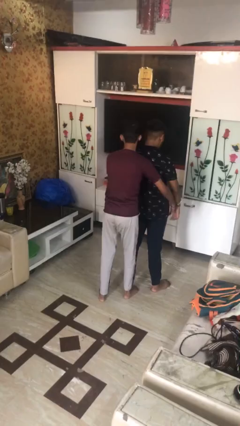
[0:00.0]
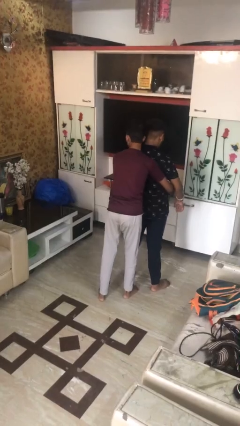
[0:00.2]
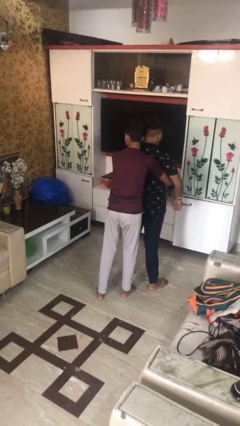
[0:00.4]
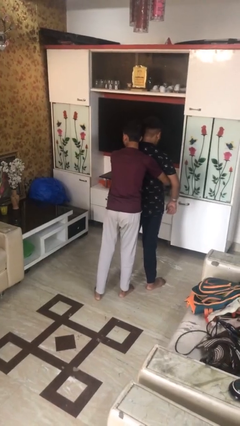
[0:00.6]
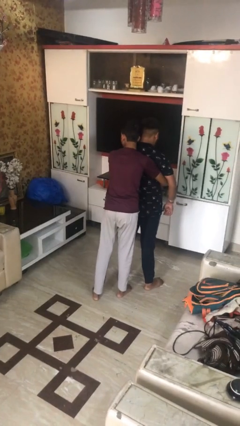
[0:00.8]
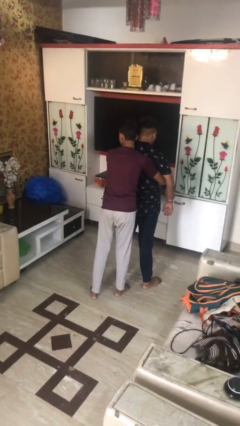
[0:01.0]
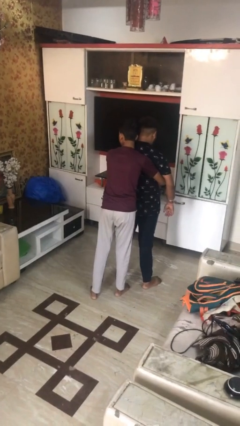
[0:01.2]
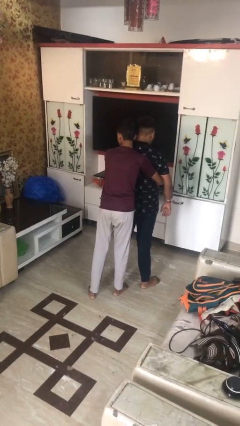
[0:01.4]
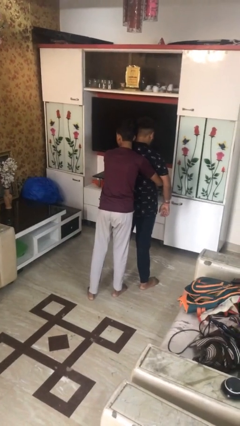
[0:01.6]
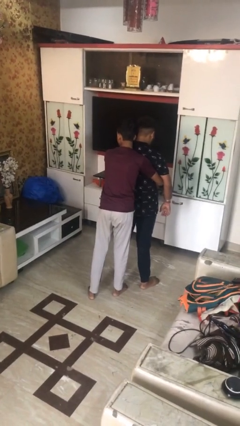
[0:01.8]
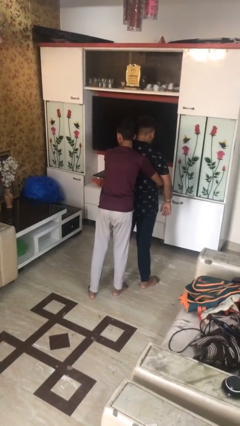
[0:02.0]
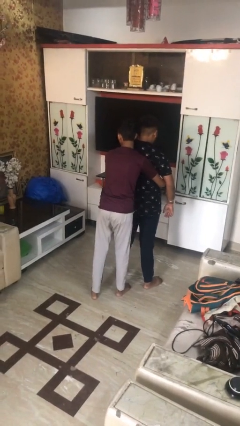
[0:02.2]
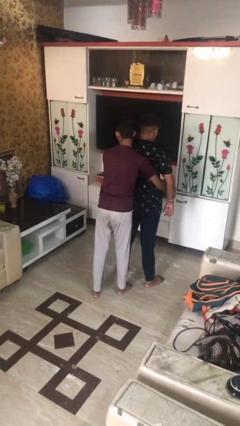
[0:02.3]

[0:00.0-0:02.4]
person hugs person from behind

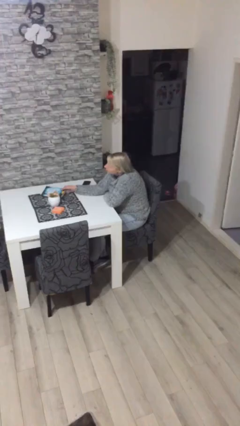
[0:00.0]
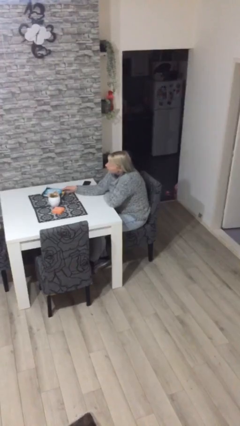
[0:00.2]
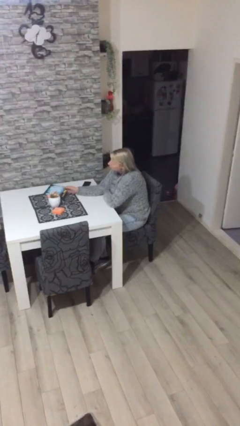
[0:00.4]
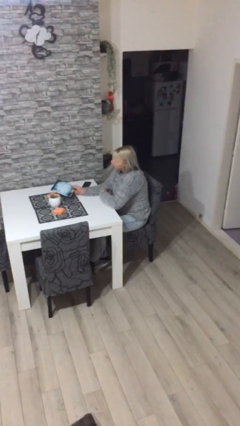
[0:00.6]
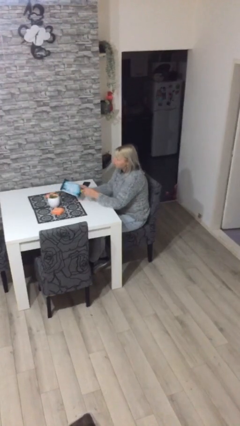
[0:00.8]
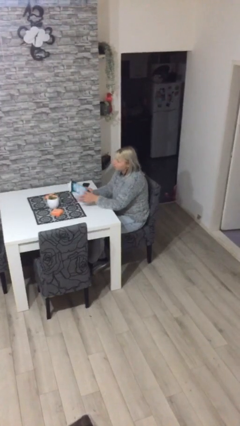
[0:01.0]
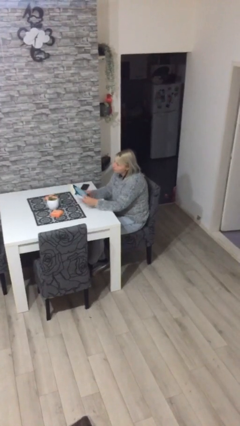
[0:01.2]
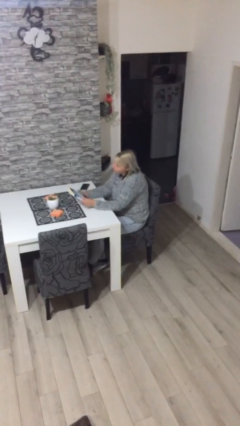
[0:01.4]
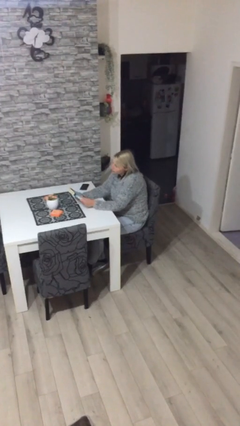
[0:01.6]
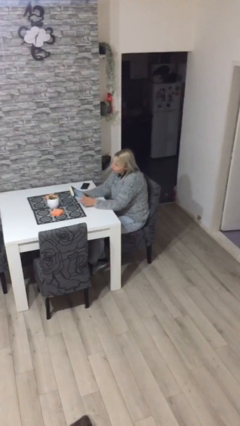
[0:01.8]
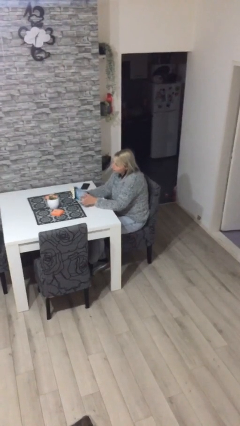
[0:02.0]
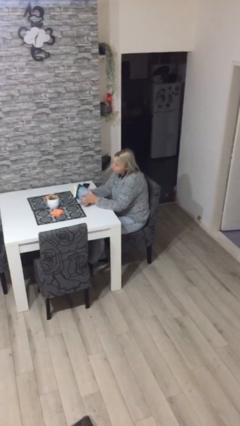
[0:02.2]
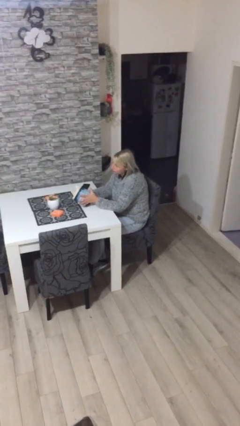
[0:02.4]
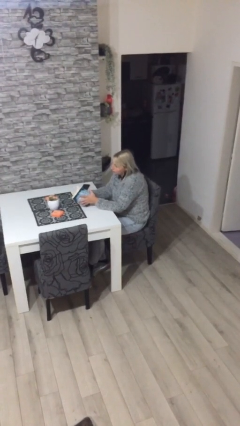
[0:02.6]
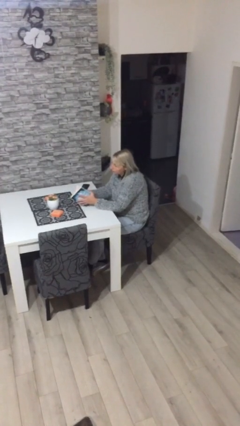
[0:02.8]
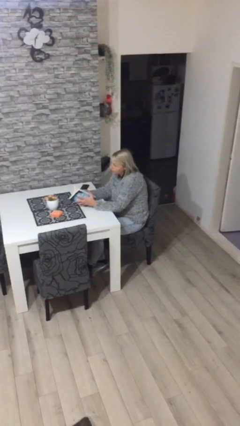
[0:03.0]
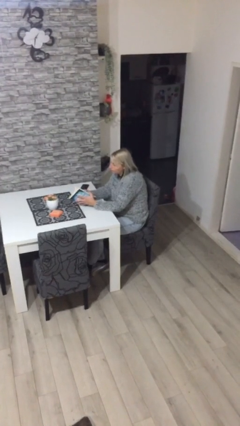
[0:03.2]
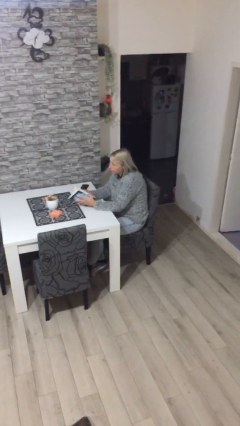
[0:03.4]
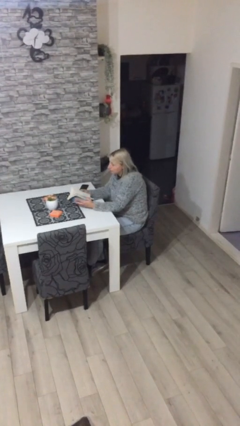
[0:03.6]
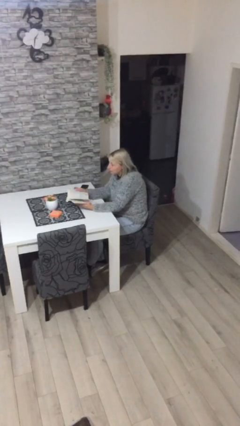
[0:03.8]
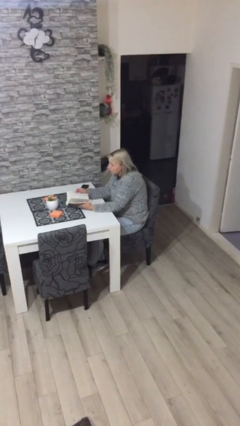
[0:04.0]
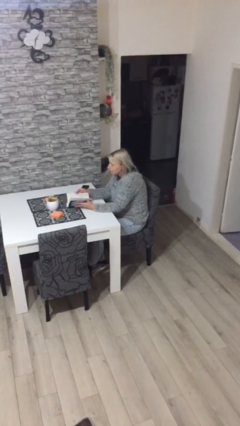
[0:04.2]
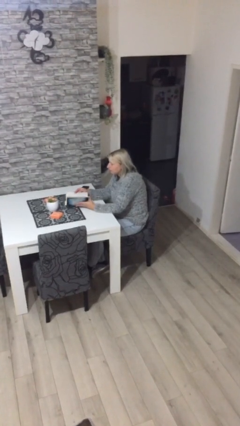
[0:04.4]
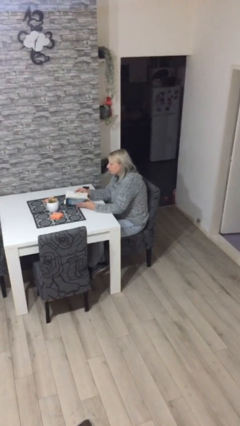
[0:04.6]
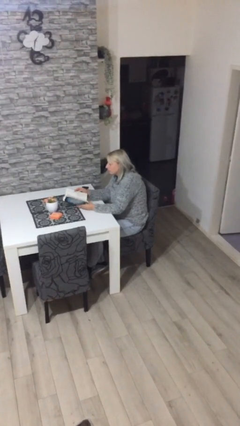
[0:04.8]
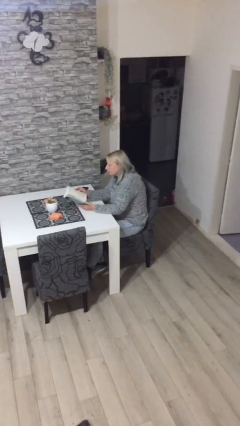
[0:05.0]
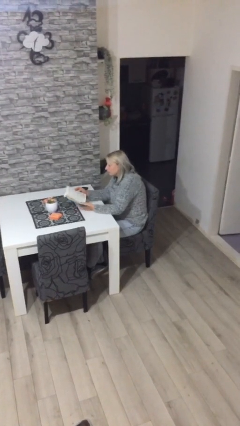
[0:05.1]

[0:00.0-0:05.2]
person picks up object from table

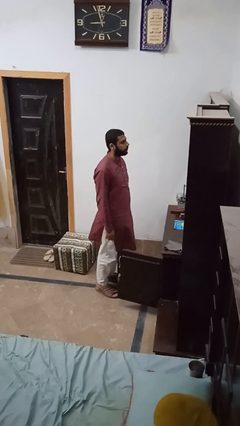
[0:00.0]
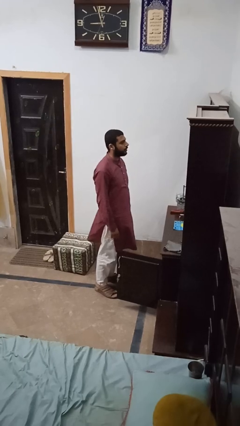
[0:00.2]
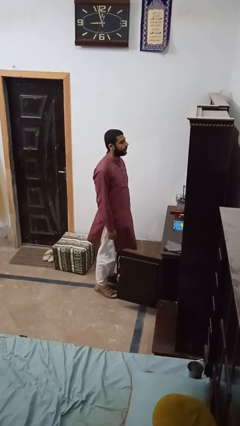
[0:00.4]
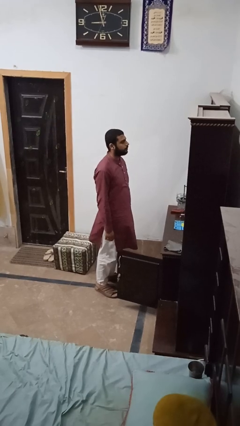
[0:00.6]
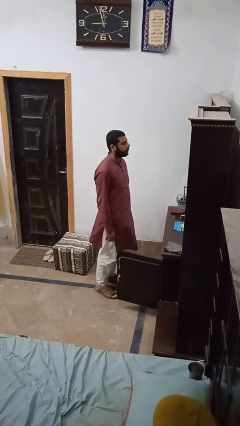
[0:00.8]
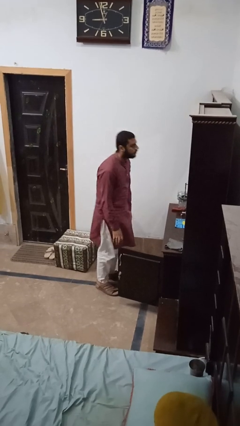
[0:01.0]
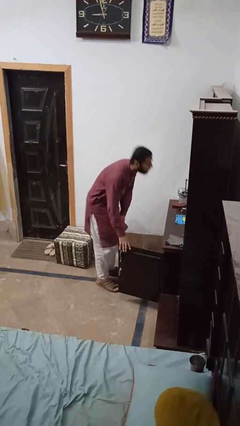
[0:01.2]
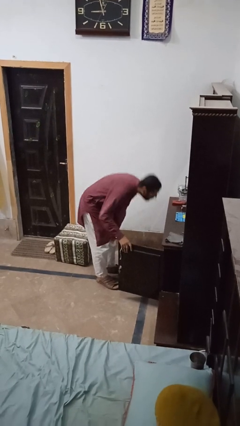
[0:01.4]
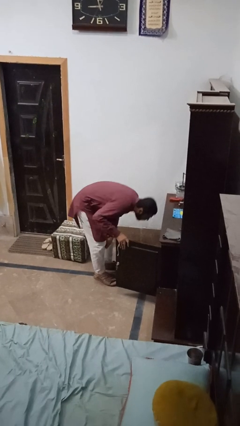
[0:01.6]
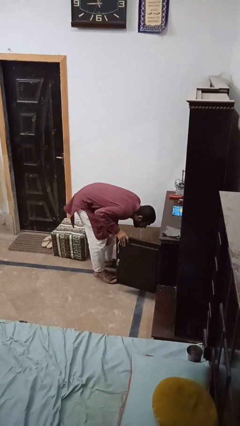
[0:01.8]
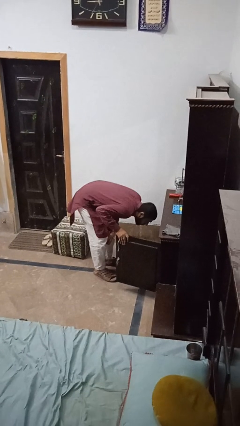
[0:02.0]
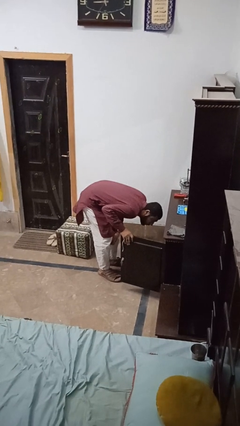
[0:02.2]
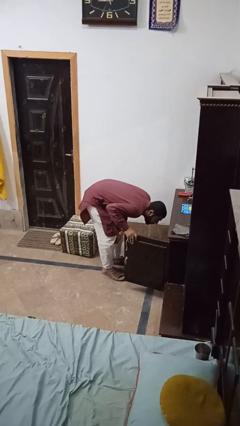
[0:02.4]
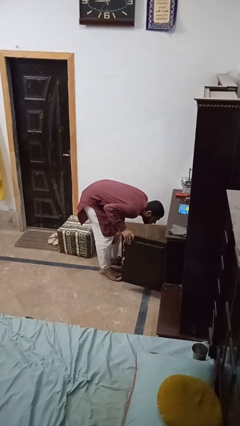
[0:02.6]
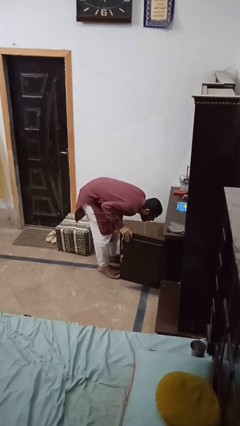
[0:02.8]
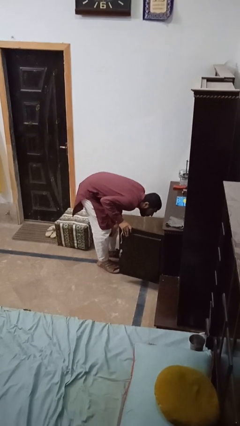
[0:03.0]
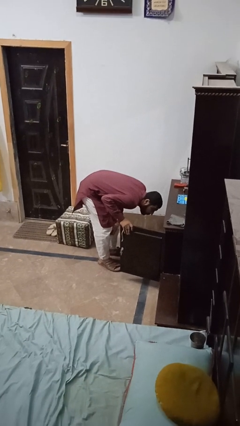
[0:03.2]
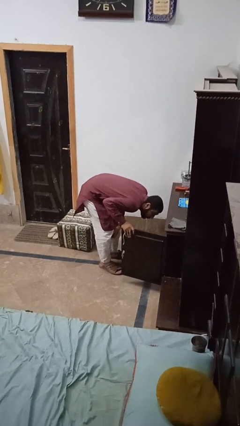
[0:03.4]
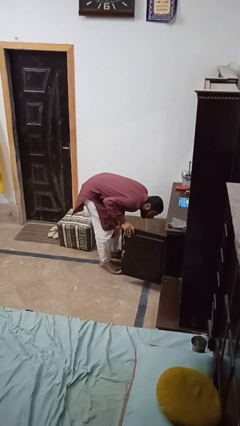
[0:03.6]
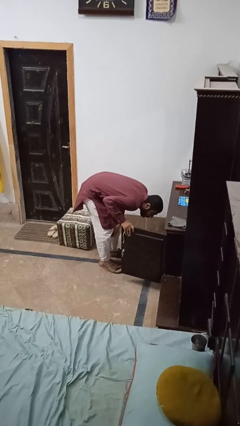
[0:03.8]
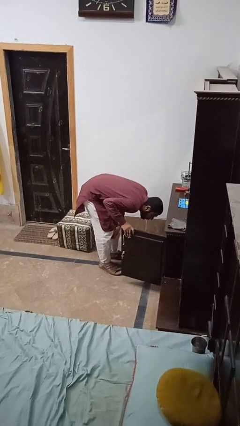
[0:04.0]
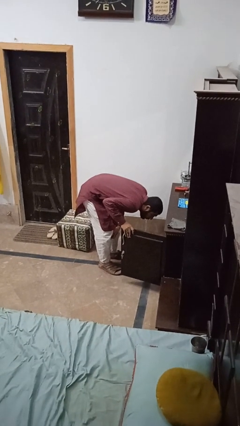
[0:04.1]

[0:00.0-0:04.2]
person searches in cabinet

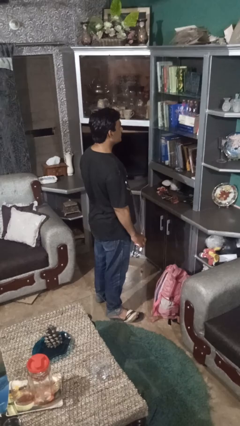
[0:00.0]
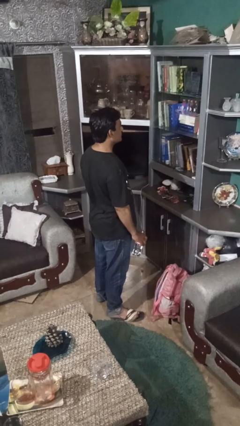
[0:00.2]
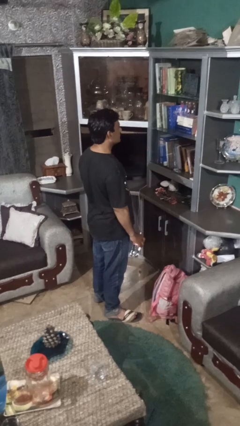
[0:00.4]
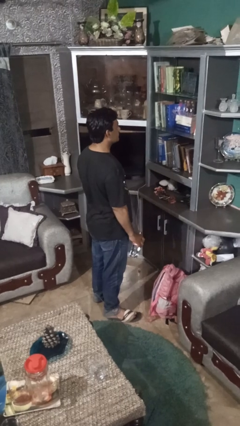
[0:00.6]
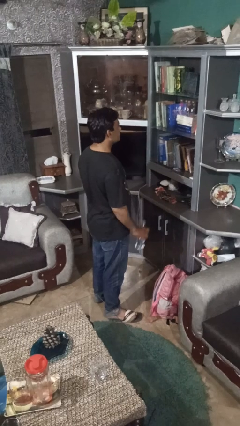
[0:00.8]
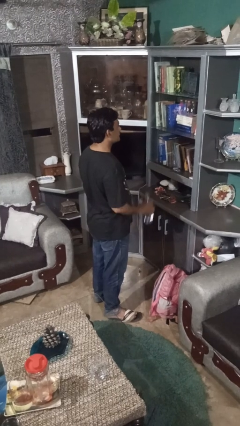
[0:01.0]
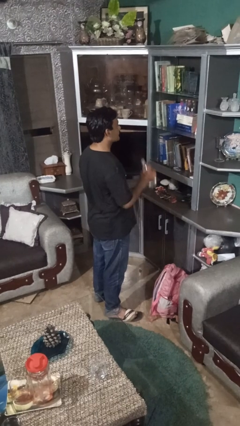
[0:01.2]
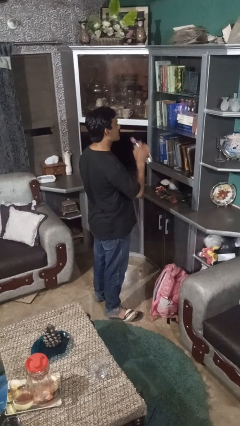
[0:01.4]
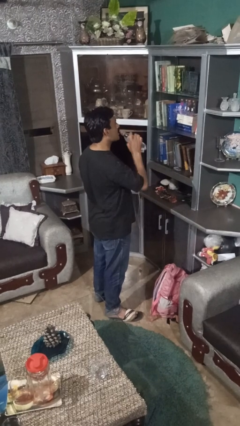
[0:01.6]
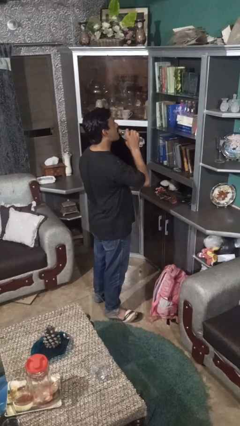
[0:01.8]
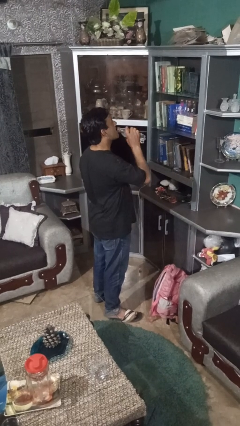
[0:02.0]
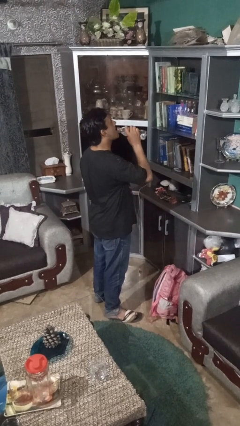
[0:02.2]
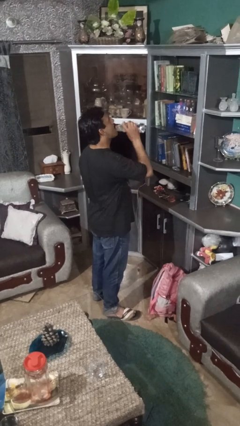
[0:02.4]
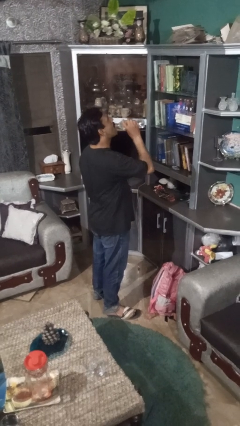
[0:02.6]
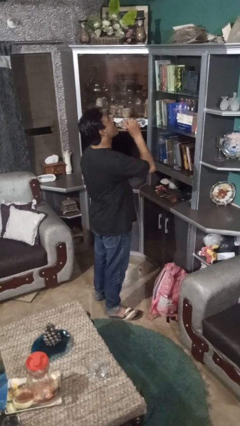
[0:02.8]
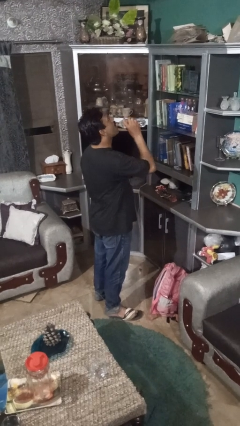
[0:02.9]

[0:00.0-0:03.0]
person drinks from bottle

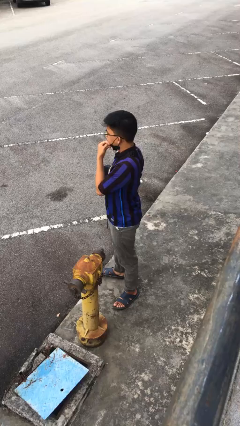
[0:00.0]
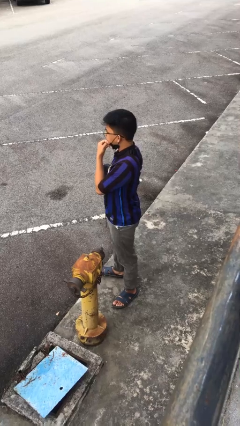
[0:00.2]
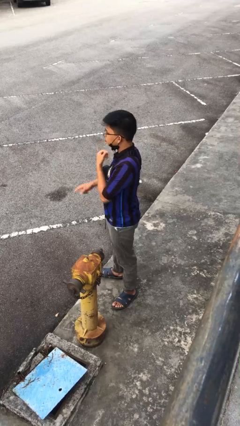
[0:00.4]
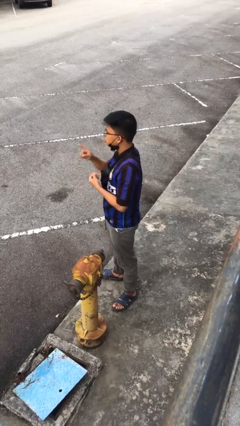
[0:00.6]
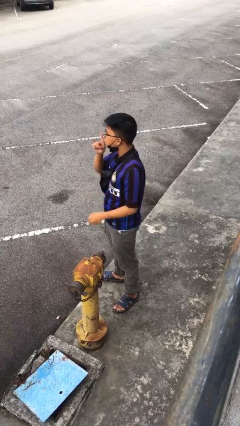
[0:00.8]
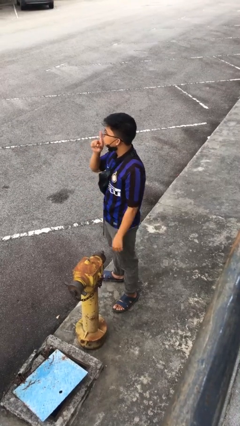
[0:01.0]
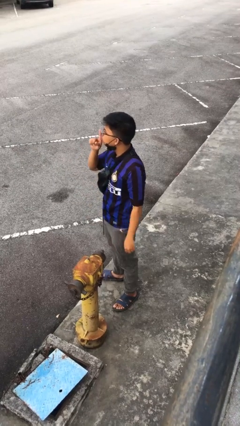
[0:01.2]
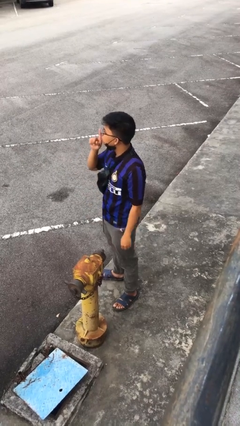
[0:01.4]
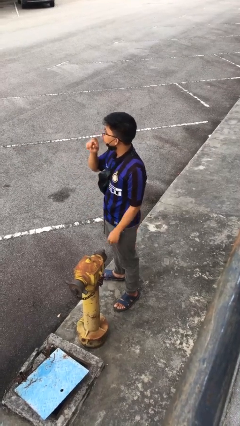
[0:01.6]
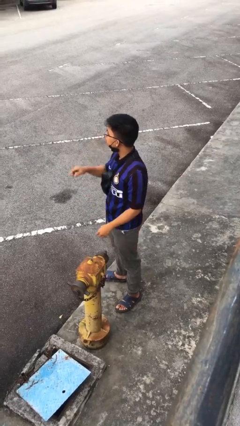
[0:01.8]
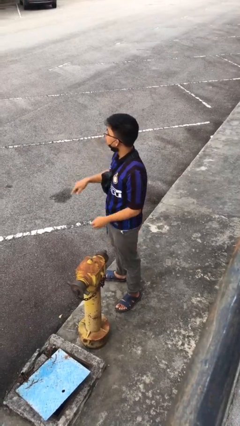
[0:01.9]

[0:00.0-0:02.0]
person gestures be quiet

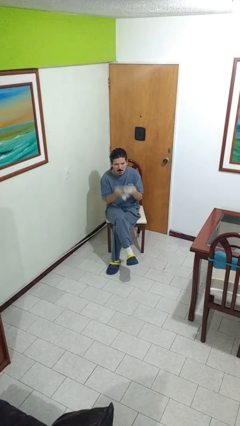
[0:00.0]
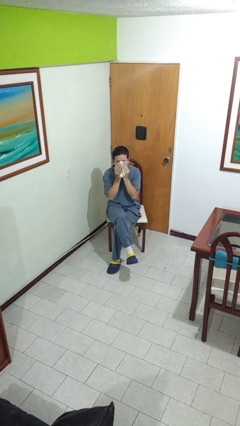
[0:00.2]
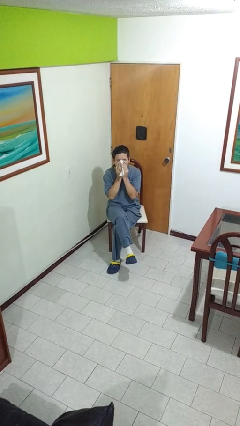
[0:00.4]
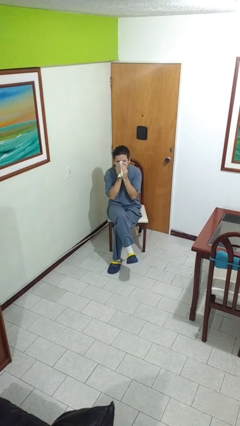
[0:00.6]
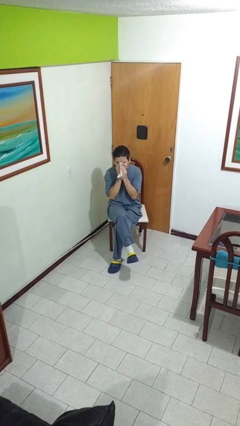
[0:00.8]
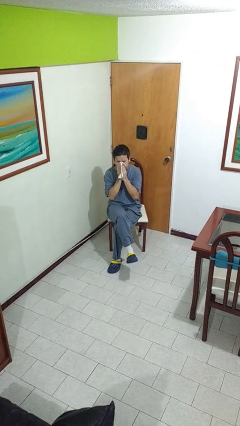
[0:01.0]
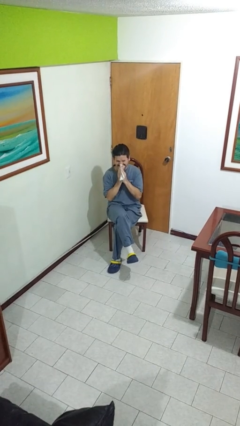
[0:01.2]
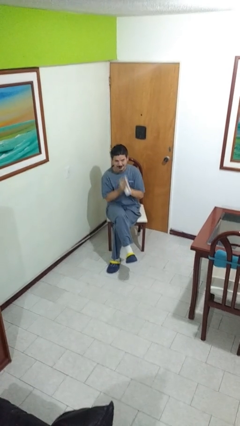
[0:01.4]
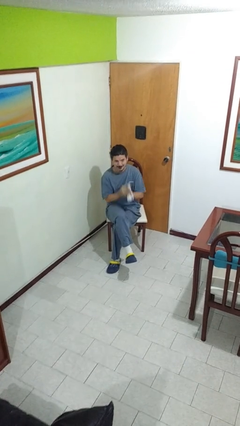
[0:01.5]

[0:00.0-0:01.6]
person blows nose
